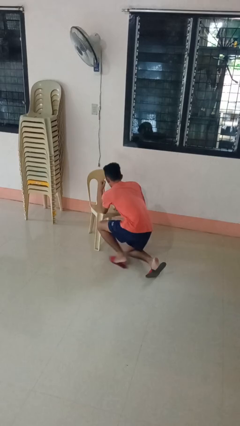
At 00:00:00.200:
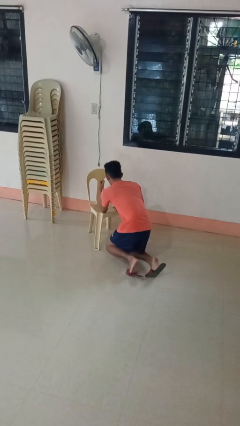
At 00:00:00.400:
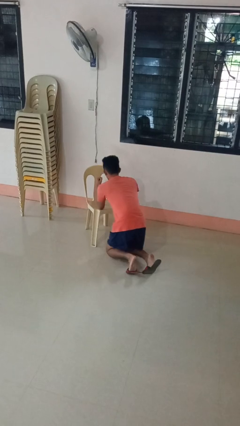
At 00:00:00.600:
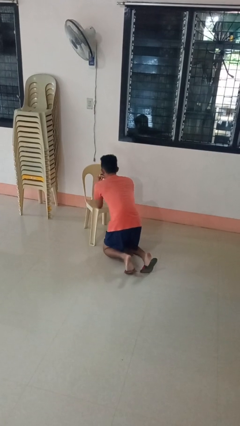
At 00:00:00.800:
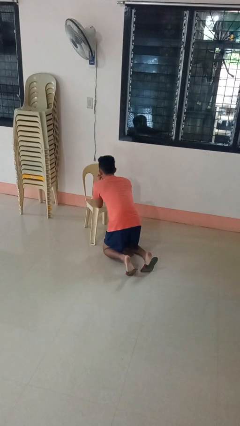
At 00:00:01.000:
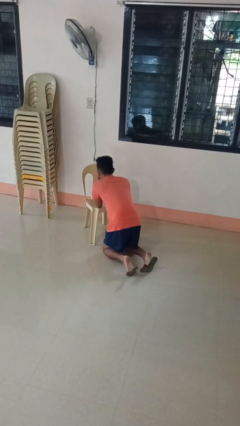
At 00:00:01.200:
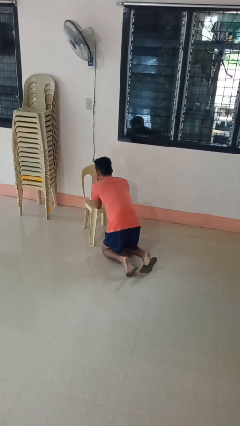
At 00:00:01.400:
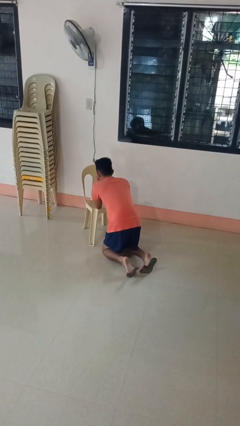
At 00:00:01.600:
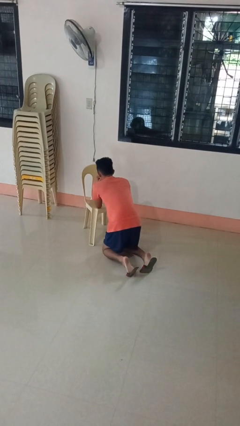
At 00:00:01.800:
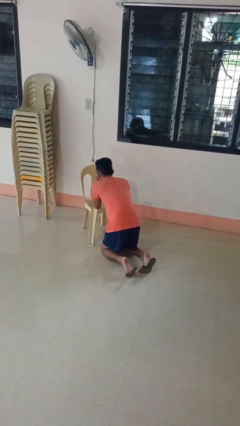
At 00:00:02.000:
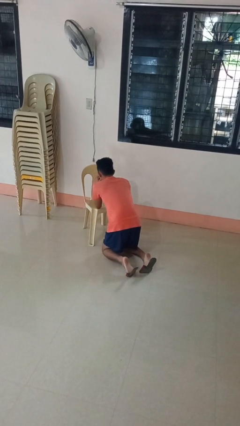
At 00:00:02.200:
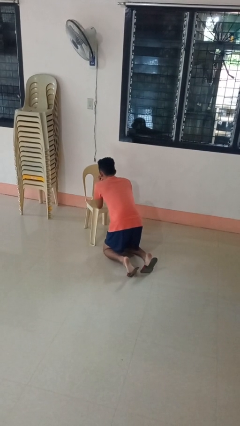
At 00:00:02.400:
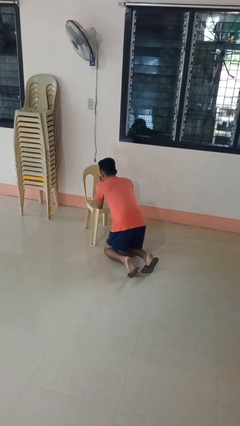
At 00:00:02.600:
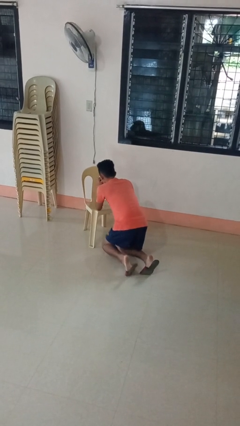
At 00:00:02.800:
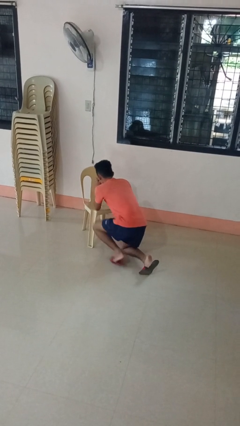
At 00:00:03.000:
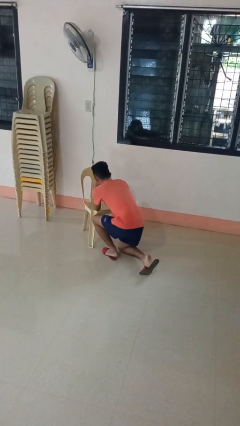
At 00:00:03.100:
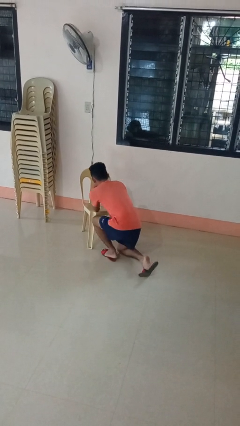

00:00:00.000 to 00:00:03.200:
person prays

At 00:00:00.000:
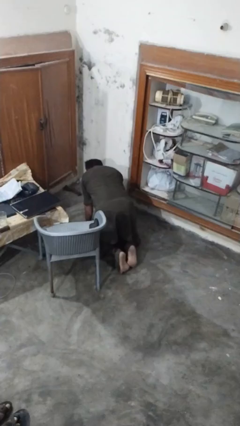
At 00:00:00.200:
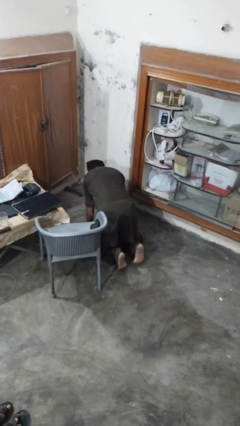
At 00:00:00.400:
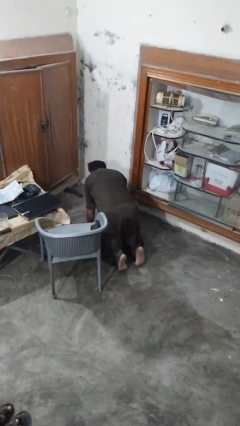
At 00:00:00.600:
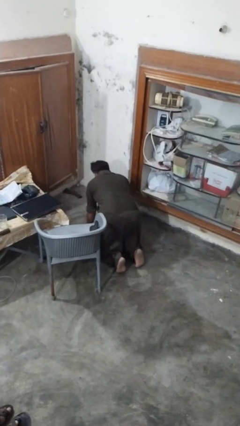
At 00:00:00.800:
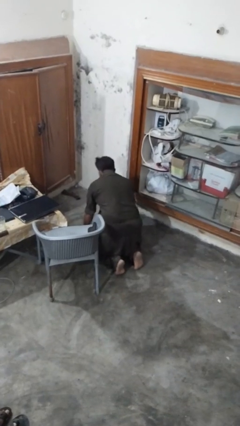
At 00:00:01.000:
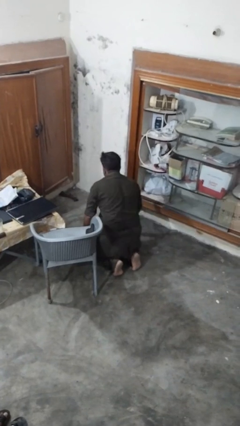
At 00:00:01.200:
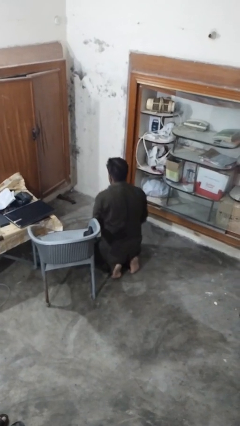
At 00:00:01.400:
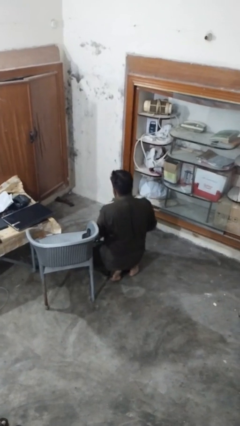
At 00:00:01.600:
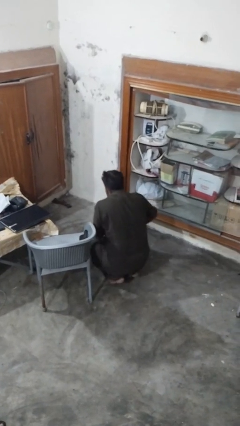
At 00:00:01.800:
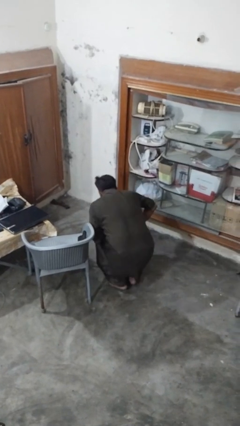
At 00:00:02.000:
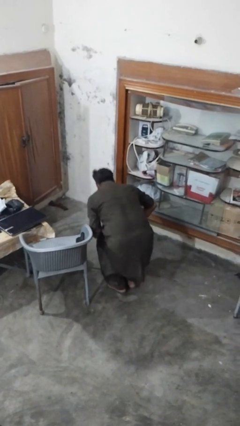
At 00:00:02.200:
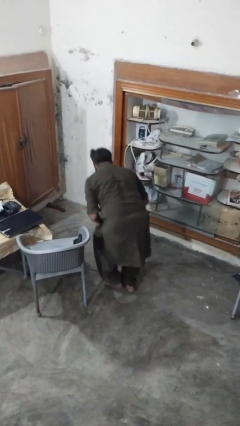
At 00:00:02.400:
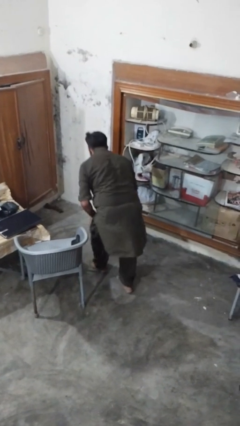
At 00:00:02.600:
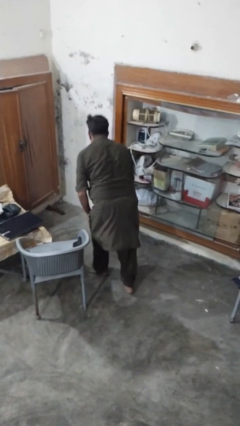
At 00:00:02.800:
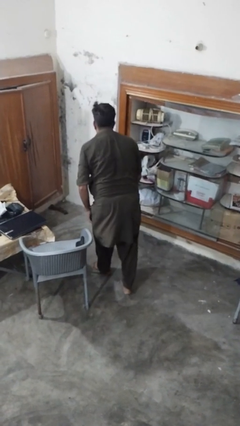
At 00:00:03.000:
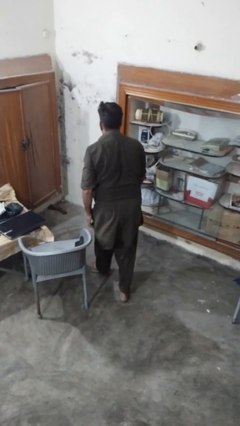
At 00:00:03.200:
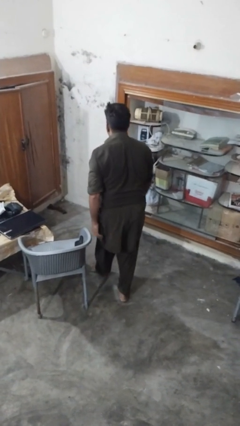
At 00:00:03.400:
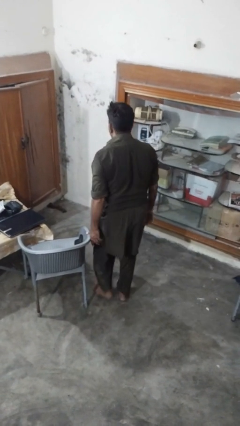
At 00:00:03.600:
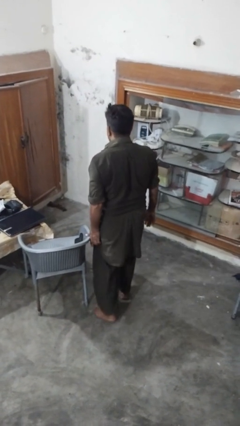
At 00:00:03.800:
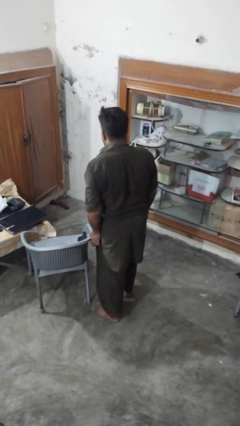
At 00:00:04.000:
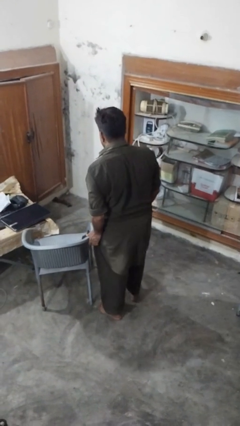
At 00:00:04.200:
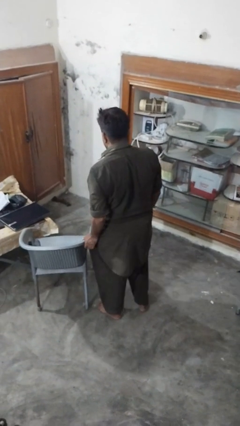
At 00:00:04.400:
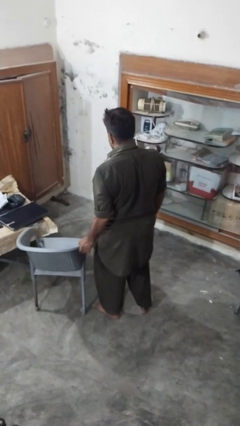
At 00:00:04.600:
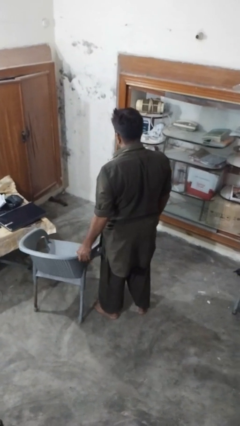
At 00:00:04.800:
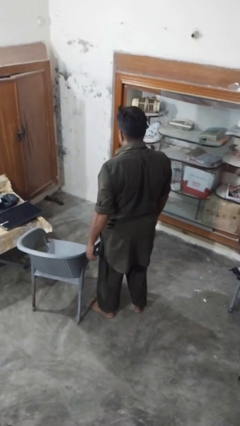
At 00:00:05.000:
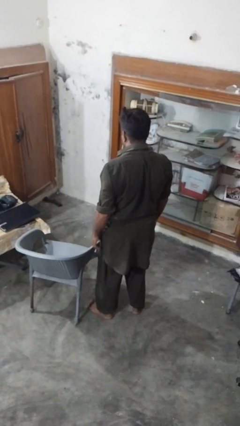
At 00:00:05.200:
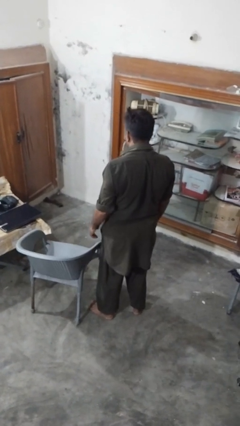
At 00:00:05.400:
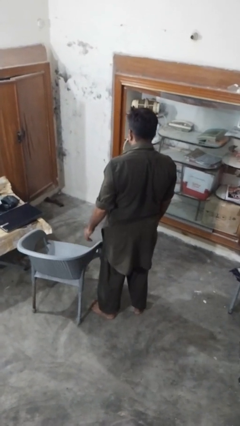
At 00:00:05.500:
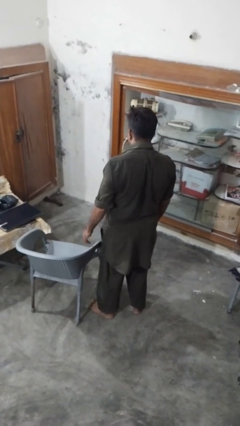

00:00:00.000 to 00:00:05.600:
person stands up from floor

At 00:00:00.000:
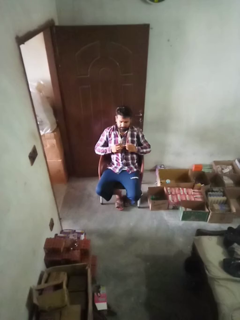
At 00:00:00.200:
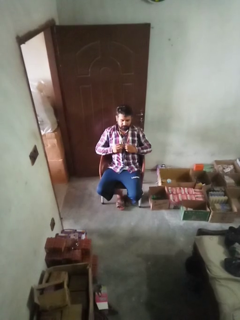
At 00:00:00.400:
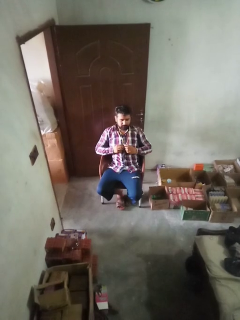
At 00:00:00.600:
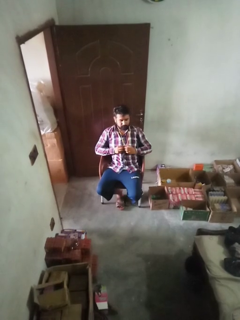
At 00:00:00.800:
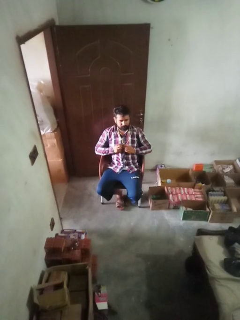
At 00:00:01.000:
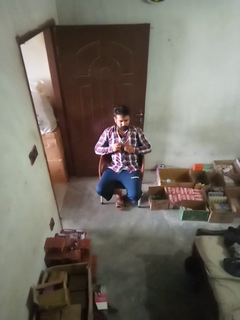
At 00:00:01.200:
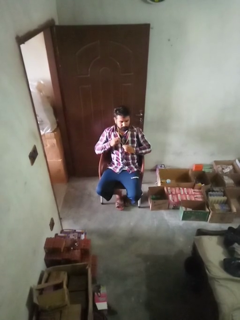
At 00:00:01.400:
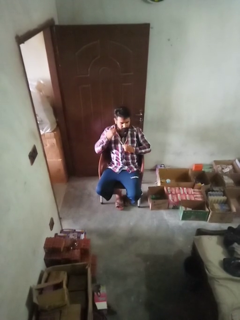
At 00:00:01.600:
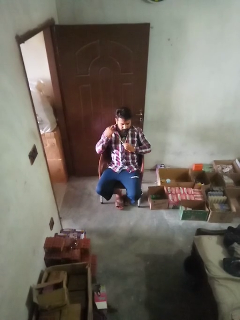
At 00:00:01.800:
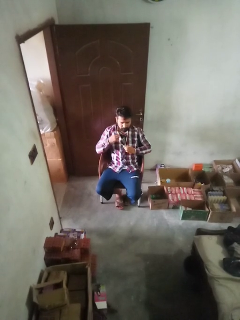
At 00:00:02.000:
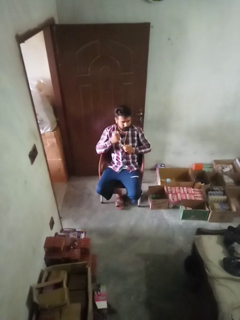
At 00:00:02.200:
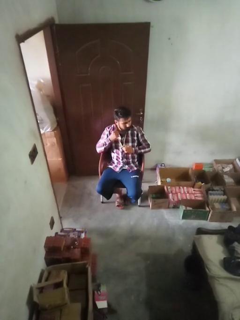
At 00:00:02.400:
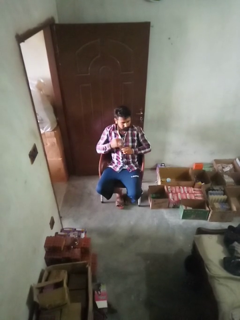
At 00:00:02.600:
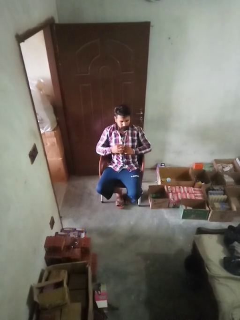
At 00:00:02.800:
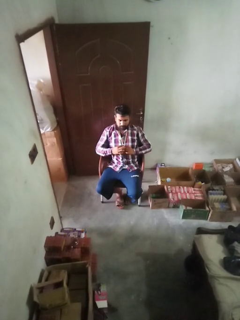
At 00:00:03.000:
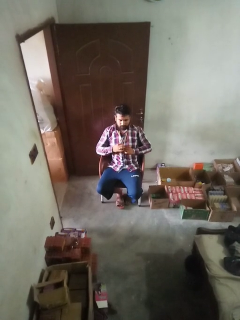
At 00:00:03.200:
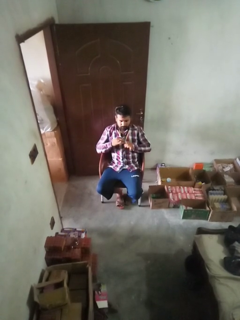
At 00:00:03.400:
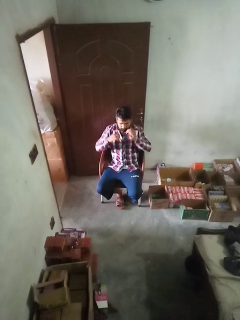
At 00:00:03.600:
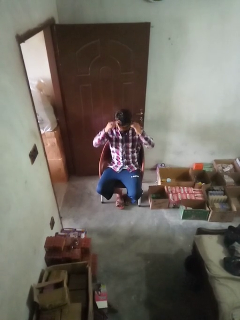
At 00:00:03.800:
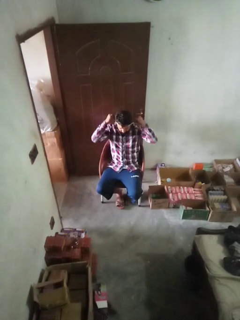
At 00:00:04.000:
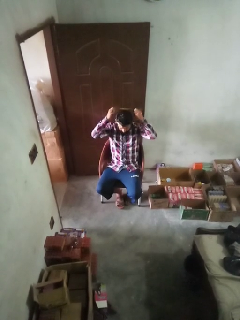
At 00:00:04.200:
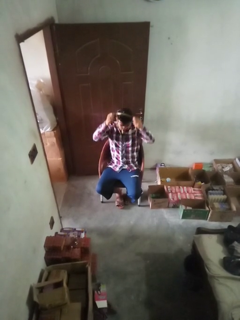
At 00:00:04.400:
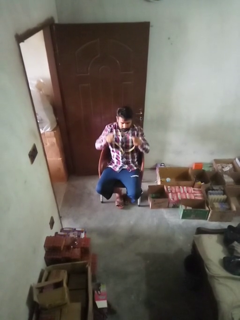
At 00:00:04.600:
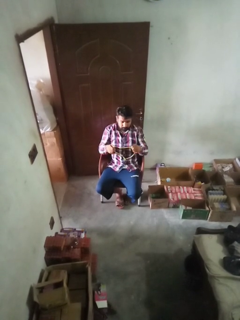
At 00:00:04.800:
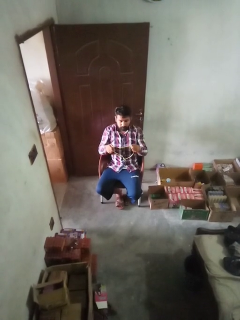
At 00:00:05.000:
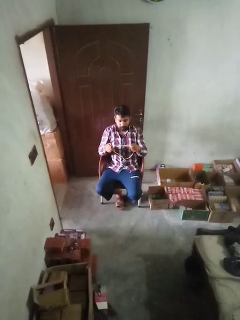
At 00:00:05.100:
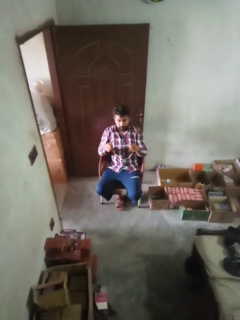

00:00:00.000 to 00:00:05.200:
person takes off necklace

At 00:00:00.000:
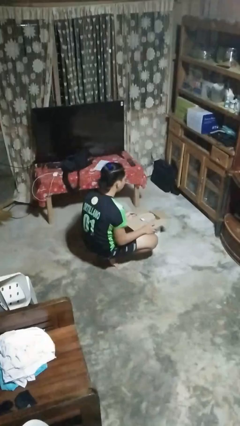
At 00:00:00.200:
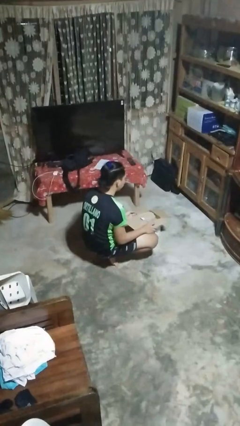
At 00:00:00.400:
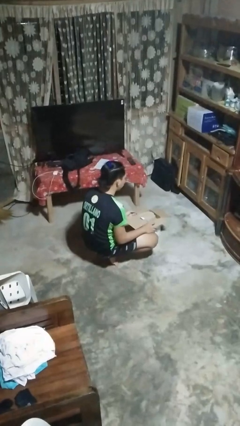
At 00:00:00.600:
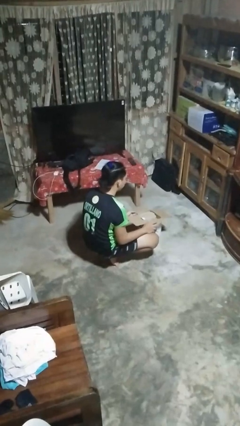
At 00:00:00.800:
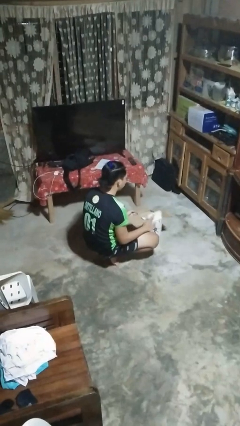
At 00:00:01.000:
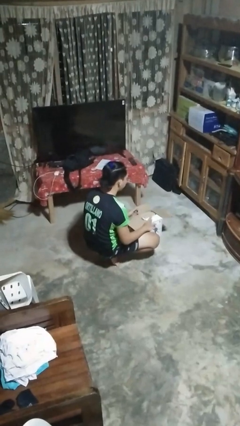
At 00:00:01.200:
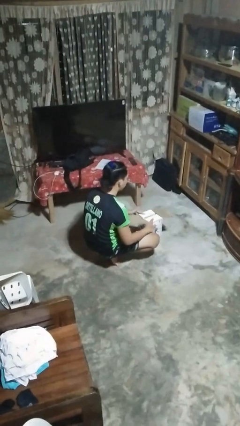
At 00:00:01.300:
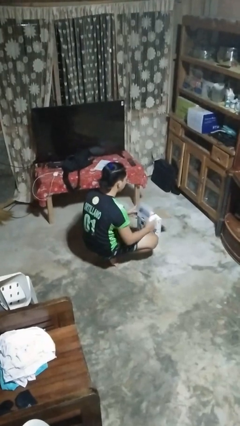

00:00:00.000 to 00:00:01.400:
person closes box

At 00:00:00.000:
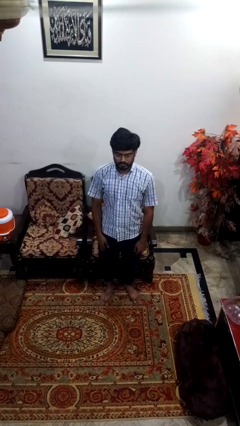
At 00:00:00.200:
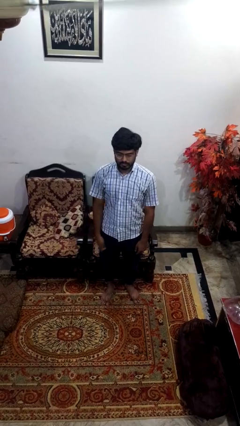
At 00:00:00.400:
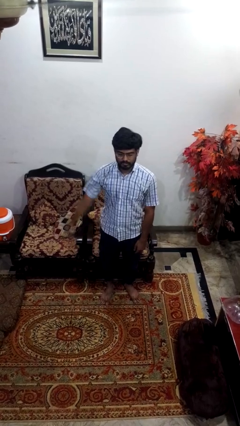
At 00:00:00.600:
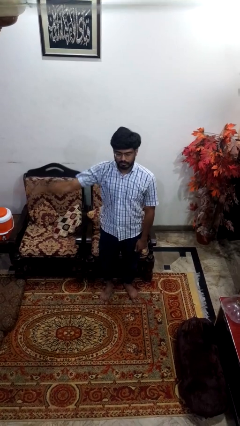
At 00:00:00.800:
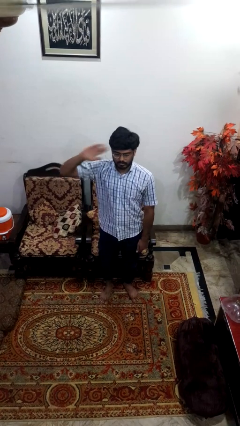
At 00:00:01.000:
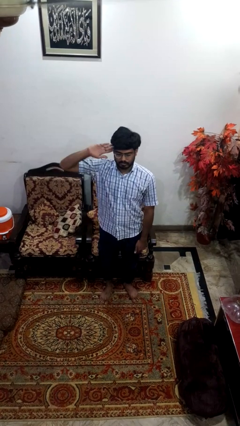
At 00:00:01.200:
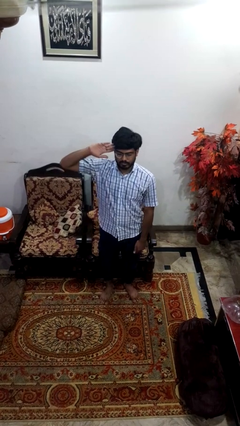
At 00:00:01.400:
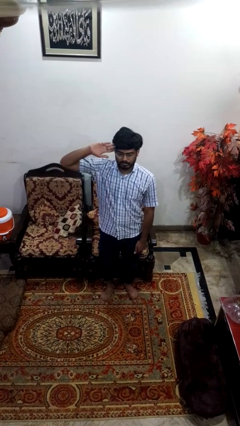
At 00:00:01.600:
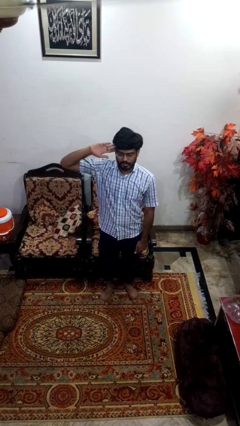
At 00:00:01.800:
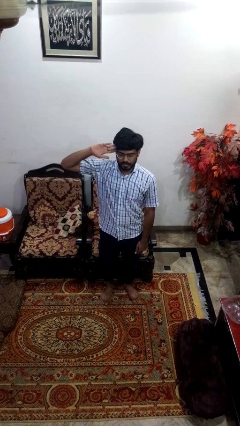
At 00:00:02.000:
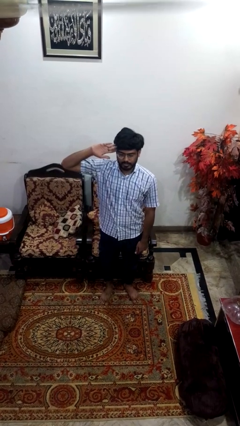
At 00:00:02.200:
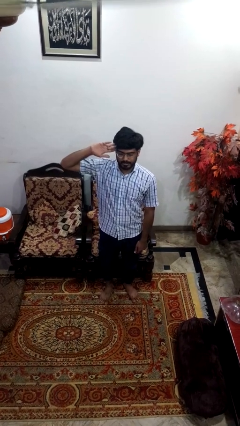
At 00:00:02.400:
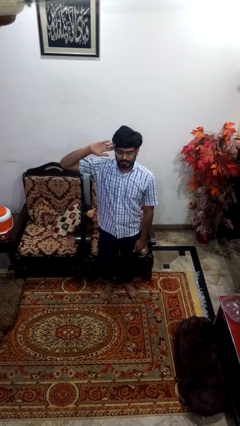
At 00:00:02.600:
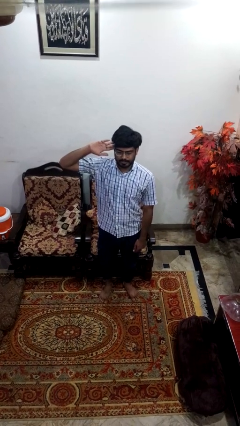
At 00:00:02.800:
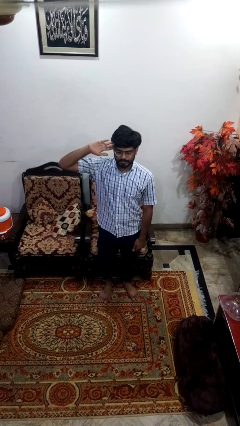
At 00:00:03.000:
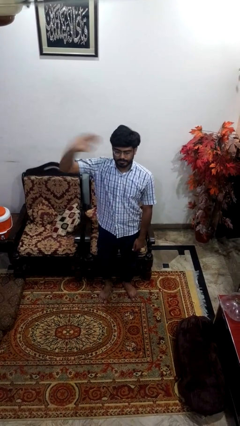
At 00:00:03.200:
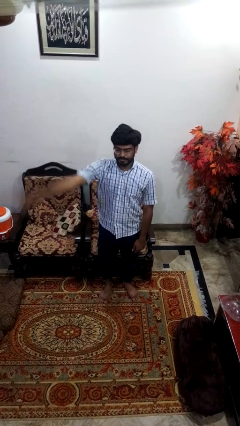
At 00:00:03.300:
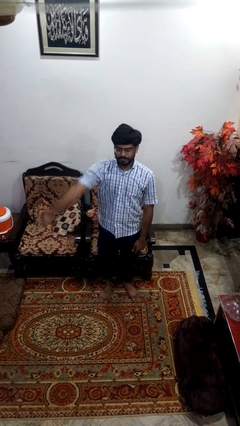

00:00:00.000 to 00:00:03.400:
person salutes
